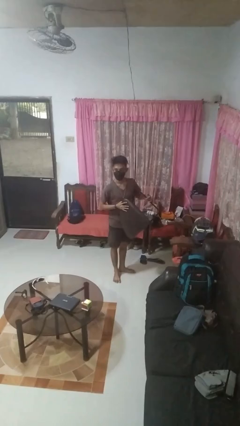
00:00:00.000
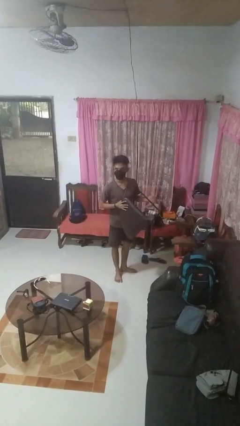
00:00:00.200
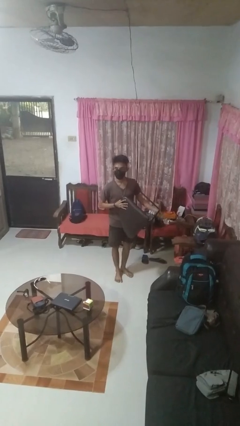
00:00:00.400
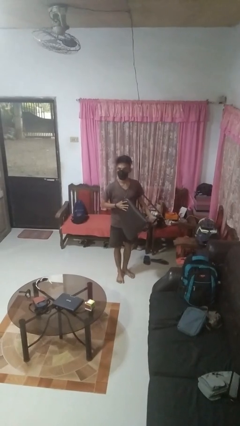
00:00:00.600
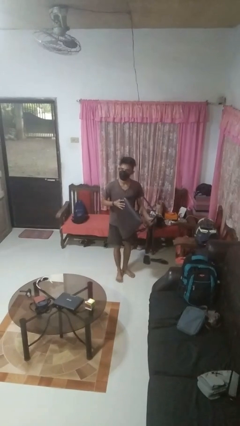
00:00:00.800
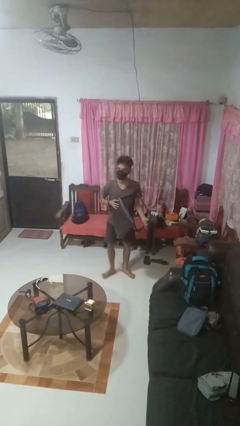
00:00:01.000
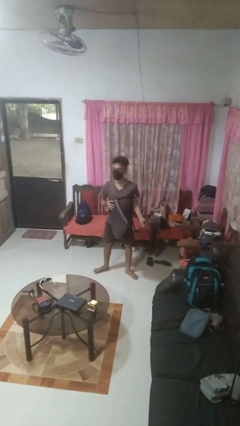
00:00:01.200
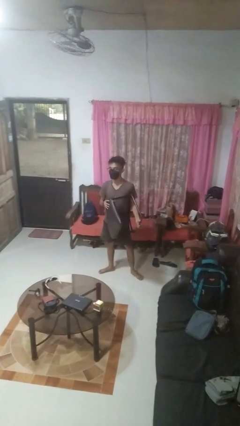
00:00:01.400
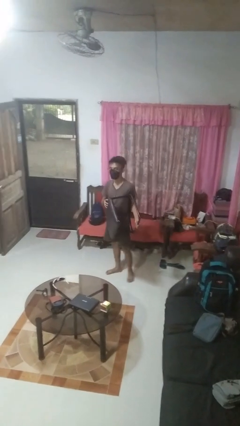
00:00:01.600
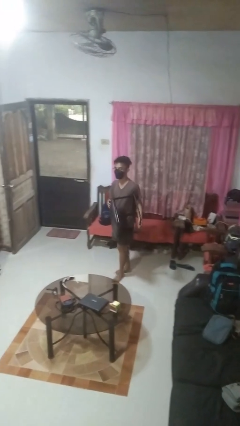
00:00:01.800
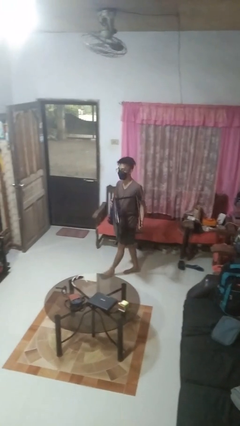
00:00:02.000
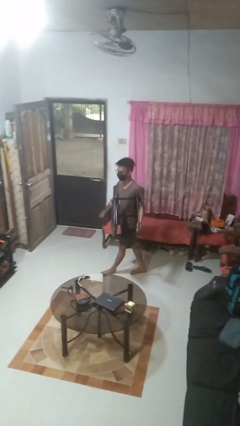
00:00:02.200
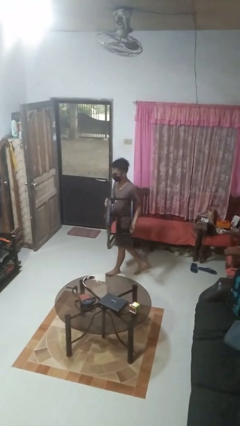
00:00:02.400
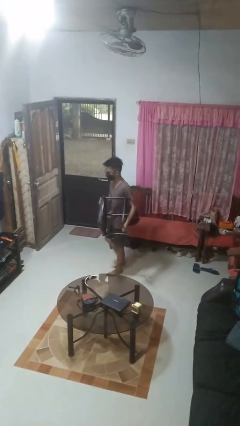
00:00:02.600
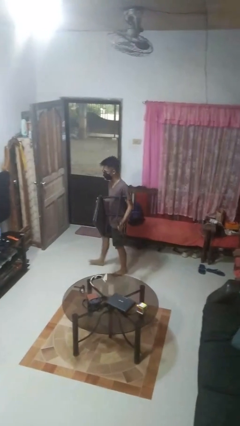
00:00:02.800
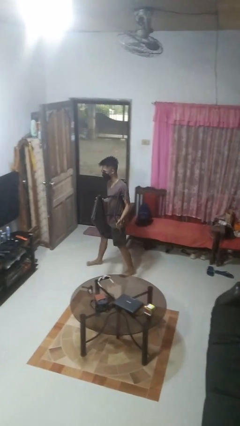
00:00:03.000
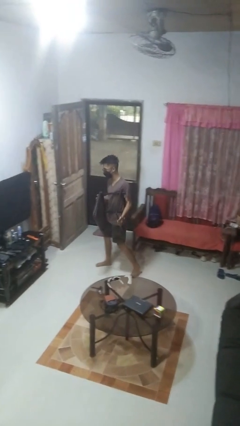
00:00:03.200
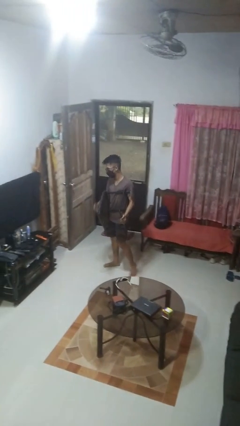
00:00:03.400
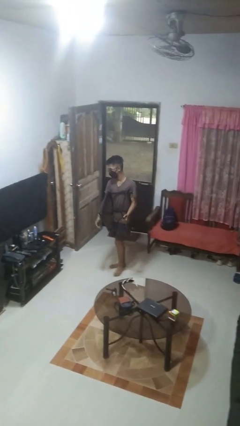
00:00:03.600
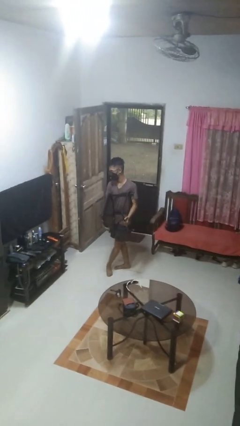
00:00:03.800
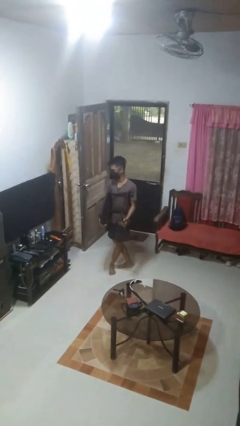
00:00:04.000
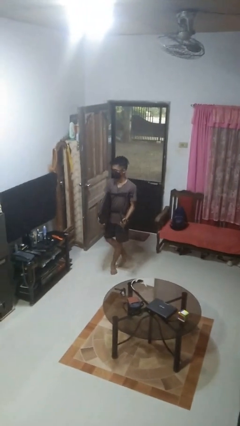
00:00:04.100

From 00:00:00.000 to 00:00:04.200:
person carries furniture

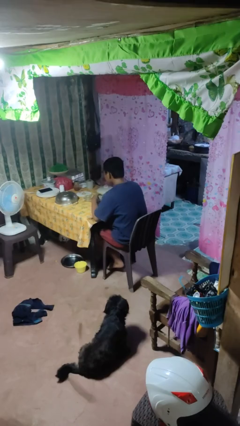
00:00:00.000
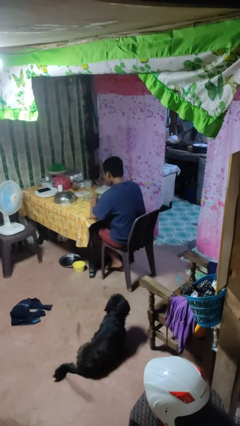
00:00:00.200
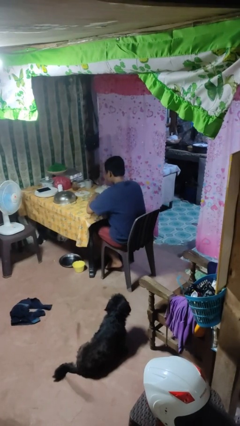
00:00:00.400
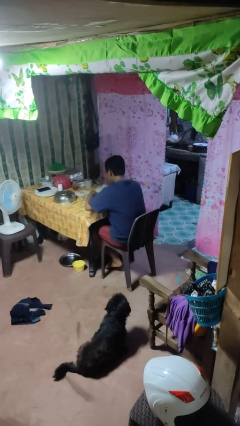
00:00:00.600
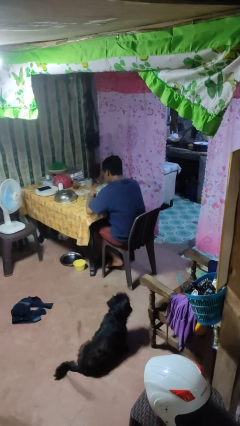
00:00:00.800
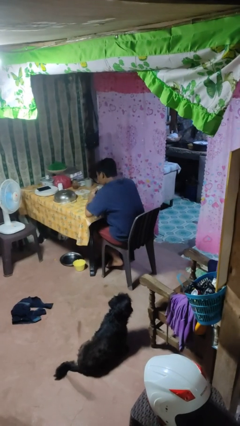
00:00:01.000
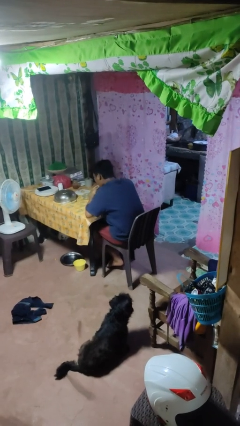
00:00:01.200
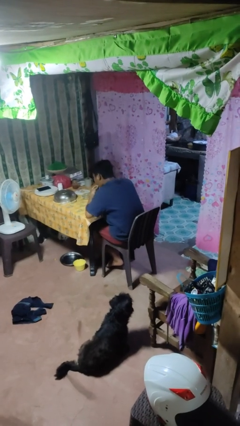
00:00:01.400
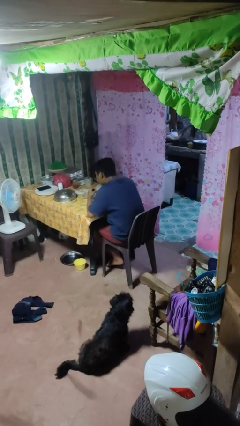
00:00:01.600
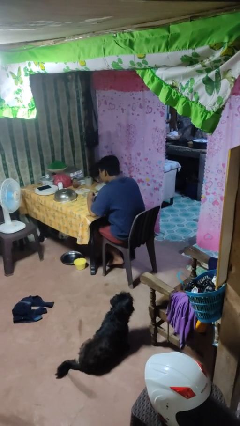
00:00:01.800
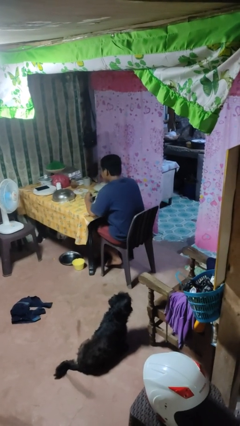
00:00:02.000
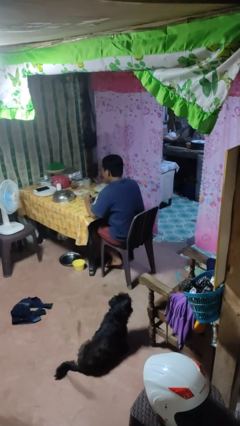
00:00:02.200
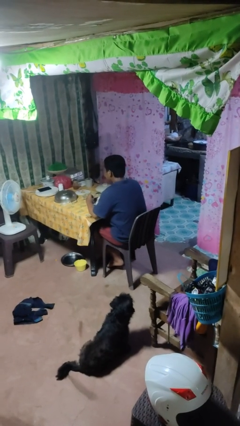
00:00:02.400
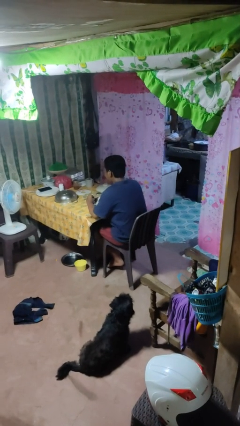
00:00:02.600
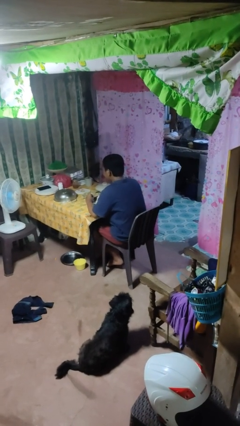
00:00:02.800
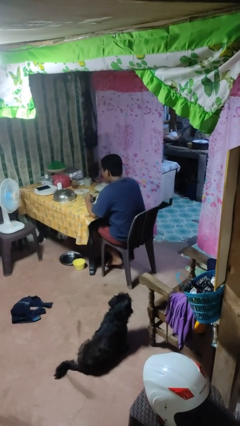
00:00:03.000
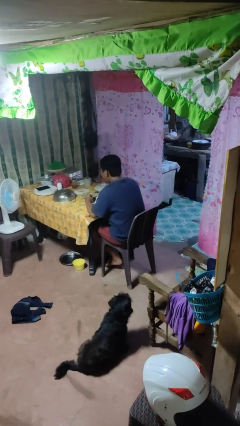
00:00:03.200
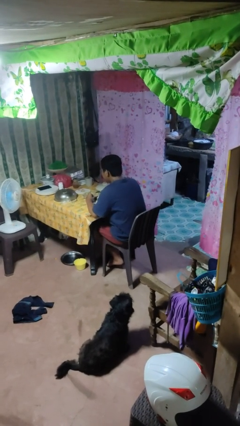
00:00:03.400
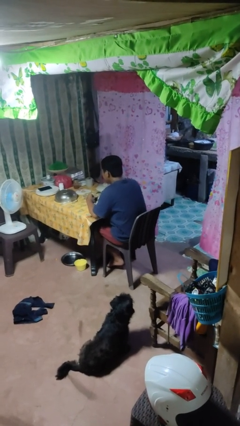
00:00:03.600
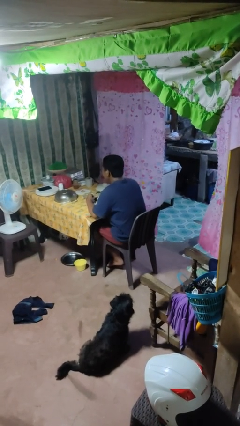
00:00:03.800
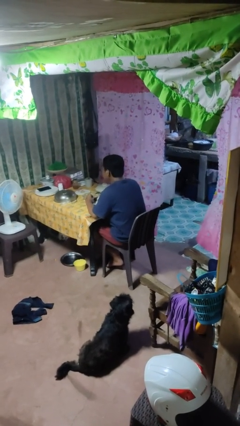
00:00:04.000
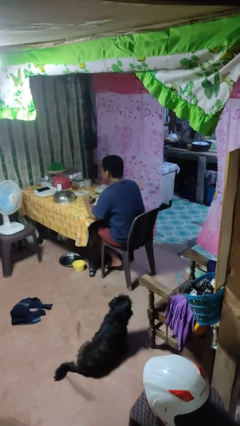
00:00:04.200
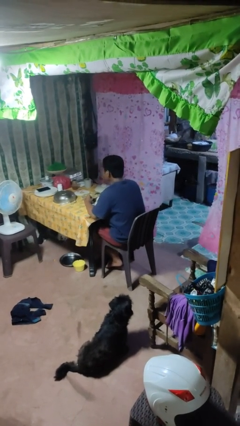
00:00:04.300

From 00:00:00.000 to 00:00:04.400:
person eats with hands

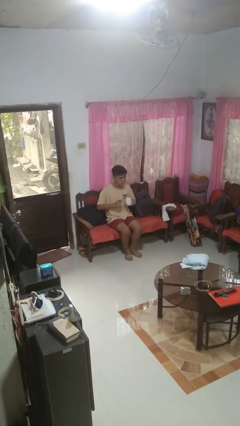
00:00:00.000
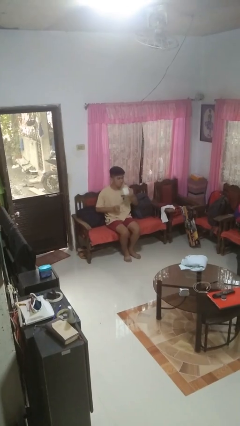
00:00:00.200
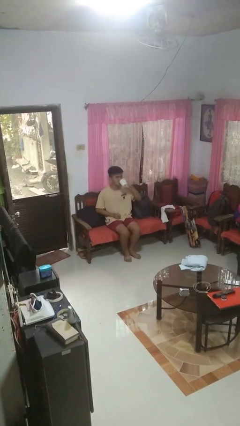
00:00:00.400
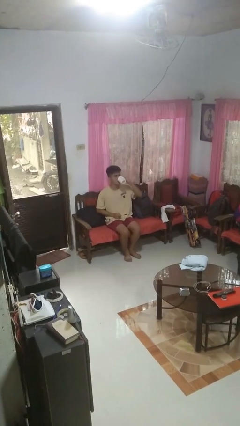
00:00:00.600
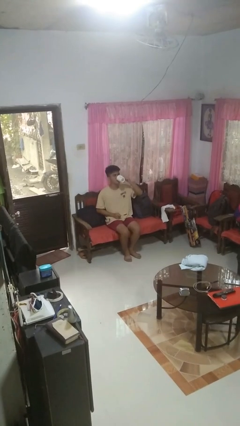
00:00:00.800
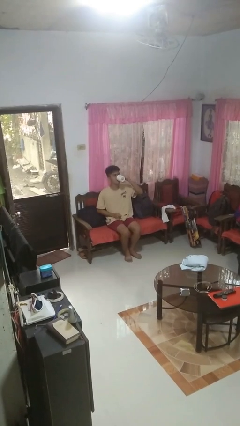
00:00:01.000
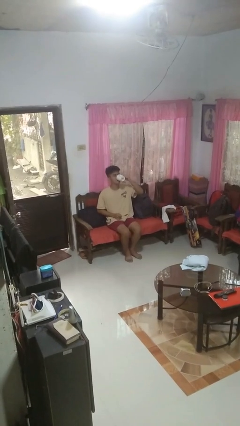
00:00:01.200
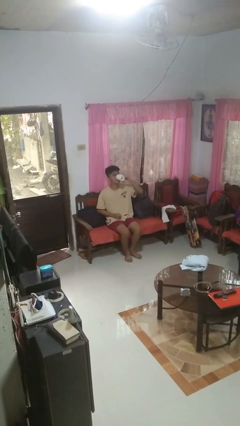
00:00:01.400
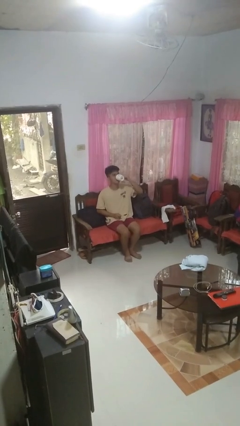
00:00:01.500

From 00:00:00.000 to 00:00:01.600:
person drinks from mug

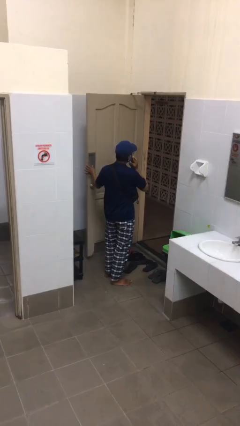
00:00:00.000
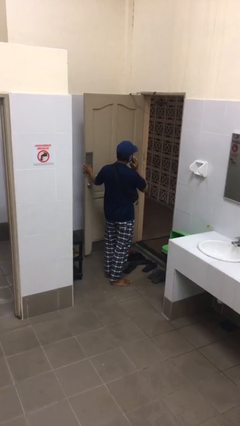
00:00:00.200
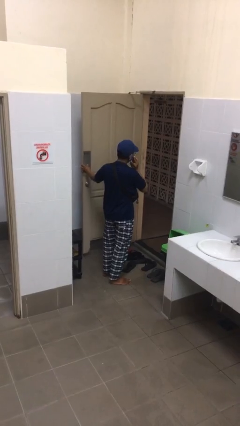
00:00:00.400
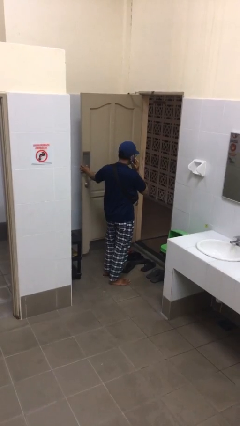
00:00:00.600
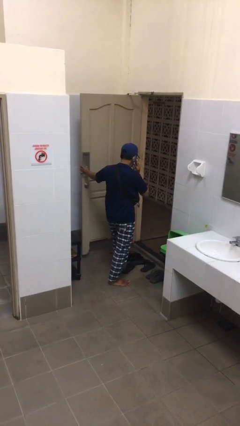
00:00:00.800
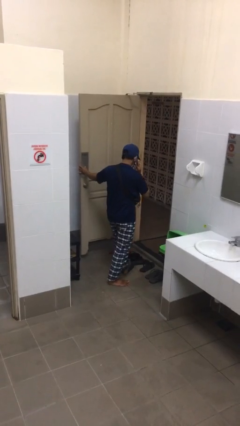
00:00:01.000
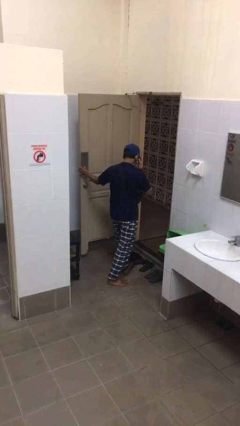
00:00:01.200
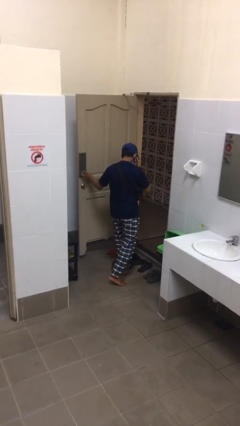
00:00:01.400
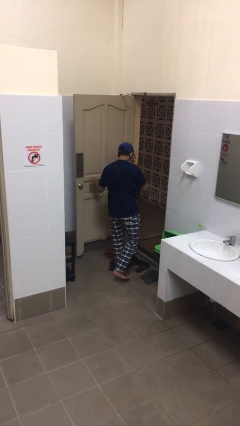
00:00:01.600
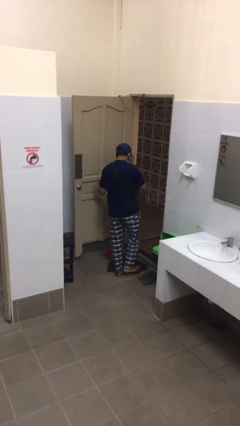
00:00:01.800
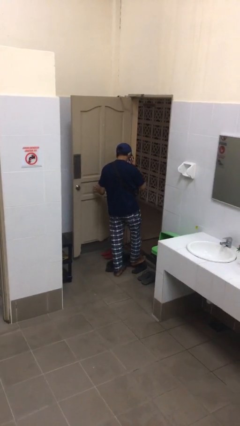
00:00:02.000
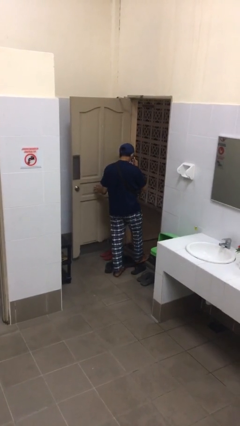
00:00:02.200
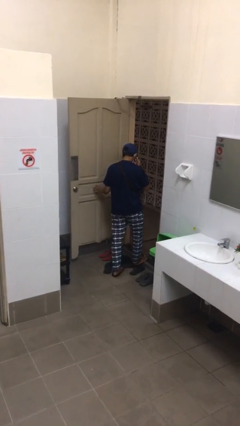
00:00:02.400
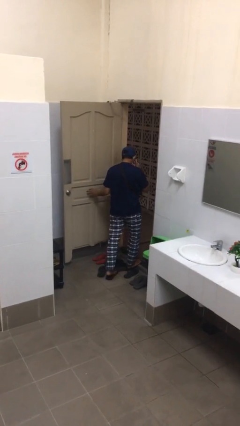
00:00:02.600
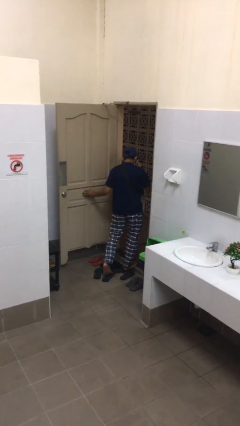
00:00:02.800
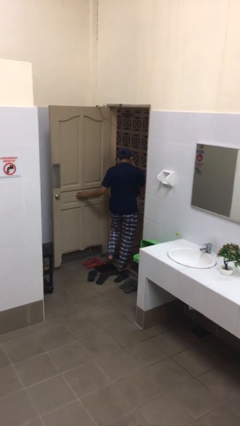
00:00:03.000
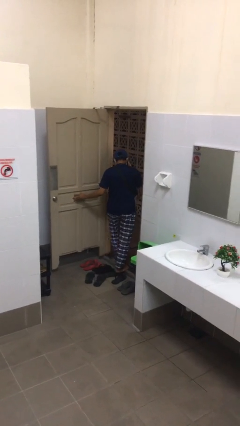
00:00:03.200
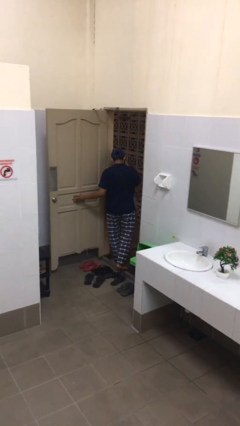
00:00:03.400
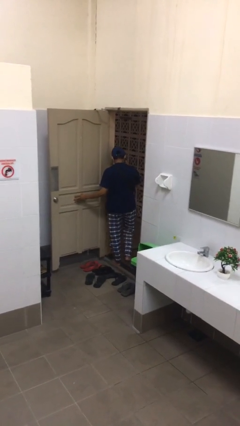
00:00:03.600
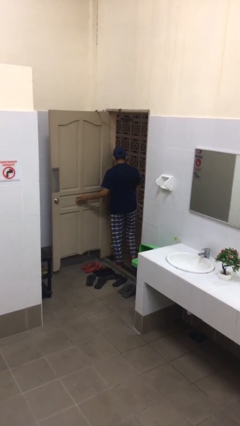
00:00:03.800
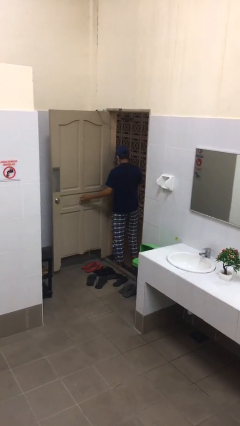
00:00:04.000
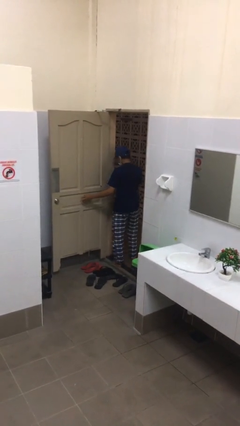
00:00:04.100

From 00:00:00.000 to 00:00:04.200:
person exits scene through structure

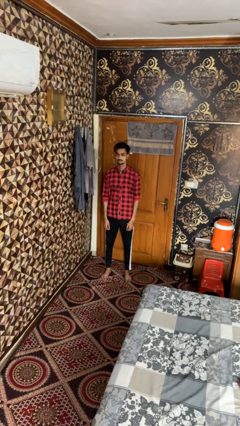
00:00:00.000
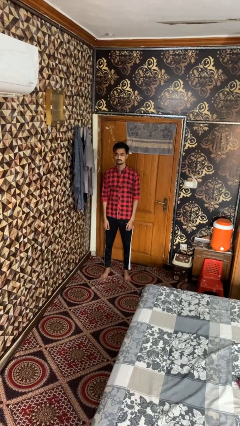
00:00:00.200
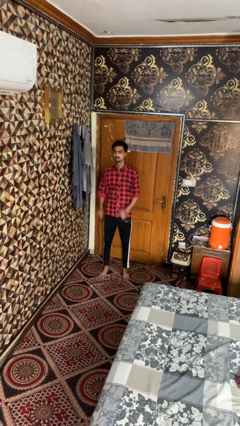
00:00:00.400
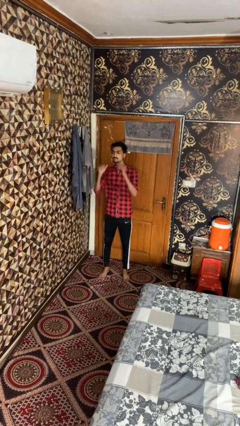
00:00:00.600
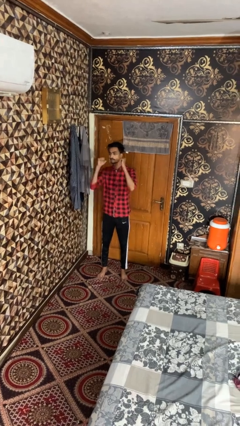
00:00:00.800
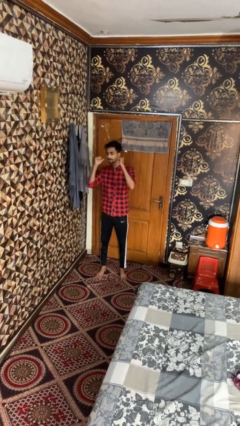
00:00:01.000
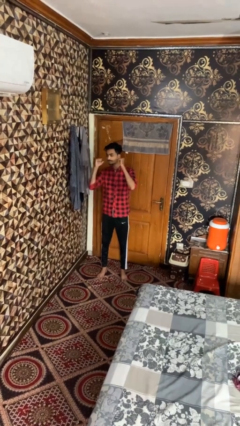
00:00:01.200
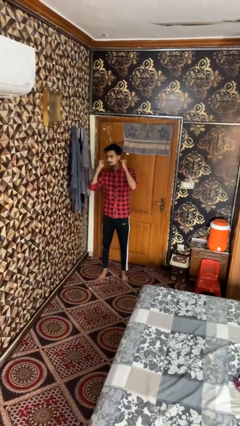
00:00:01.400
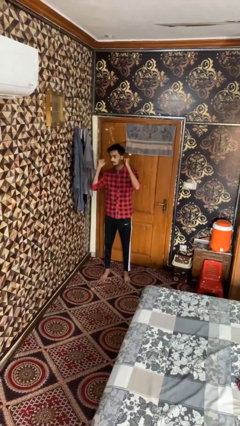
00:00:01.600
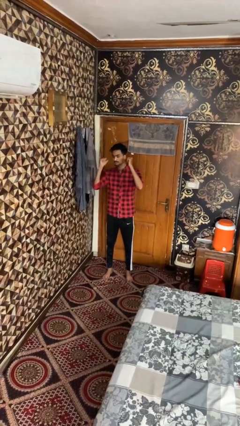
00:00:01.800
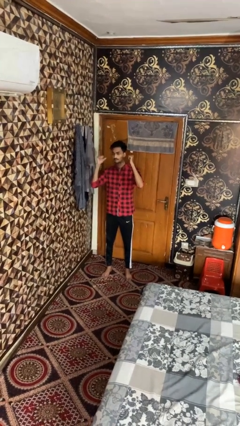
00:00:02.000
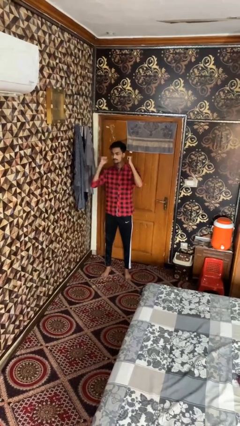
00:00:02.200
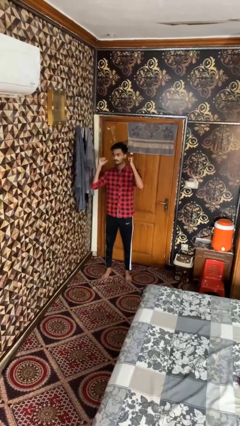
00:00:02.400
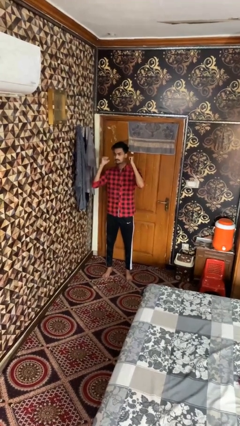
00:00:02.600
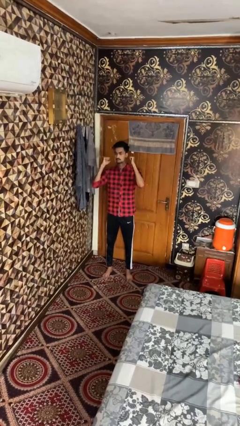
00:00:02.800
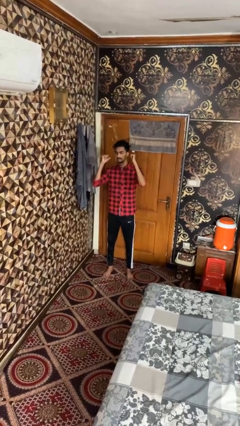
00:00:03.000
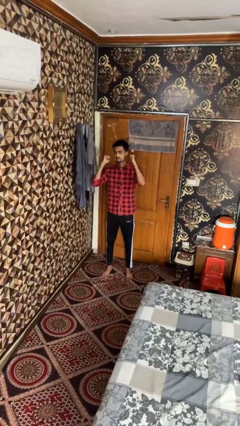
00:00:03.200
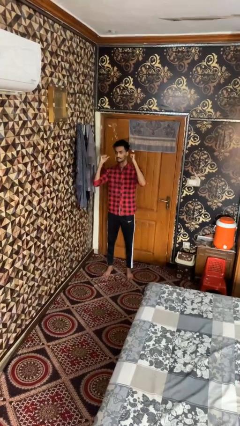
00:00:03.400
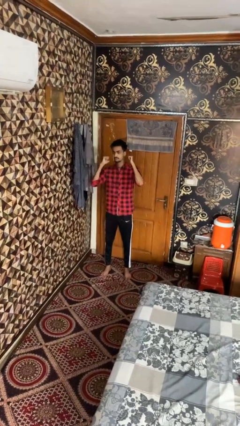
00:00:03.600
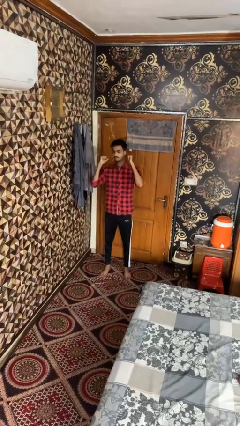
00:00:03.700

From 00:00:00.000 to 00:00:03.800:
person gestures behind me
